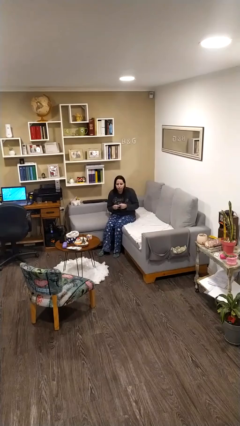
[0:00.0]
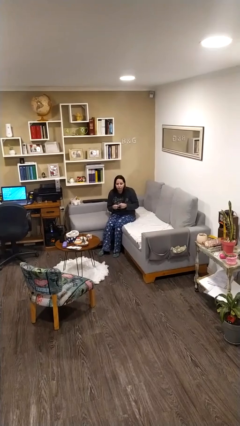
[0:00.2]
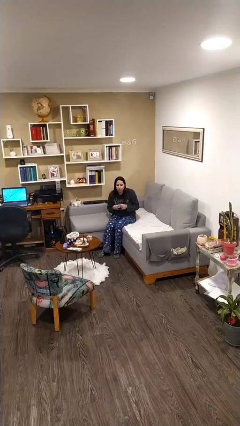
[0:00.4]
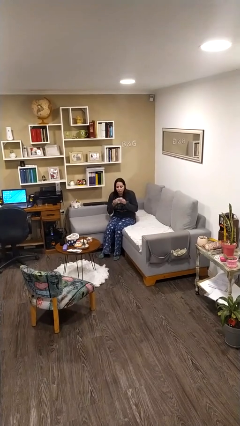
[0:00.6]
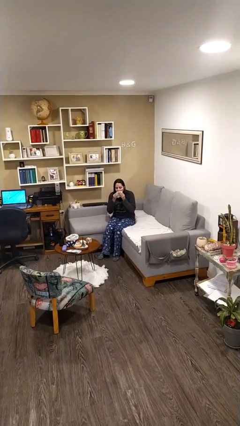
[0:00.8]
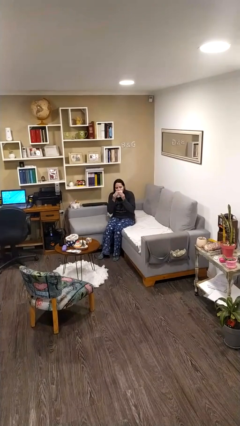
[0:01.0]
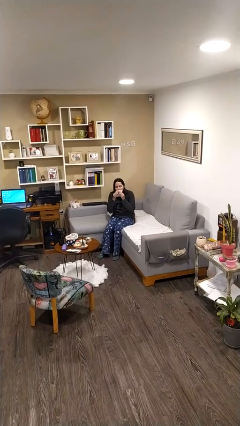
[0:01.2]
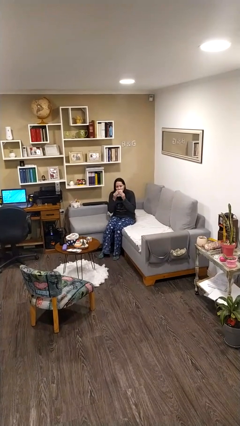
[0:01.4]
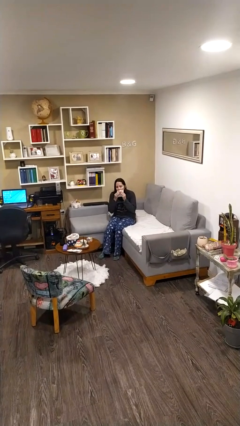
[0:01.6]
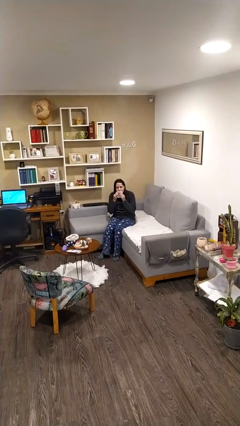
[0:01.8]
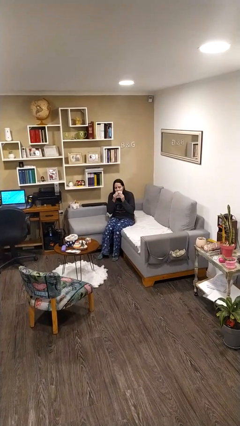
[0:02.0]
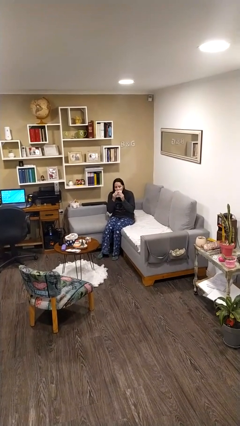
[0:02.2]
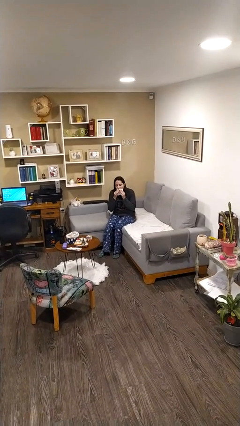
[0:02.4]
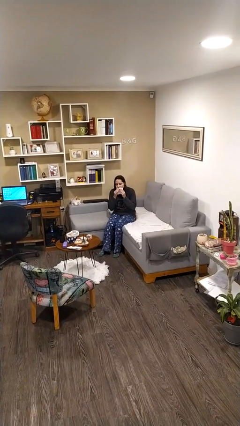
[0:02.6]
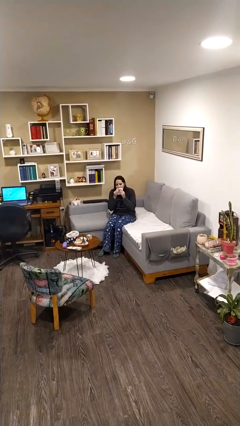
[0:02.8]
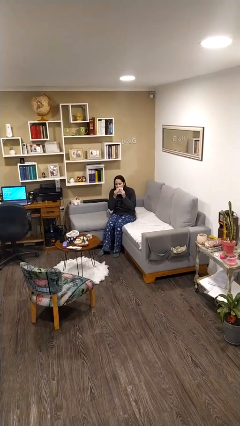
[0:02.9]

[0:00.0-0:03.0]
person wipes mouth with napkin

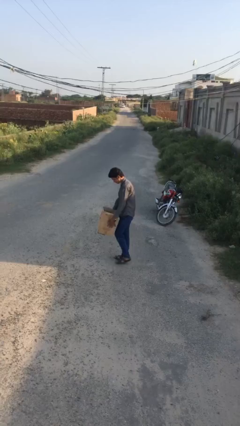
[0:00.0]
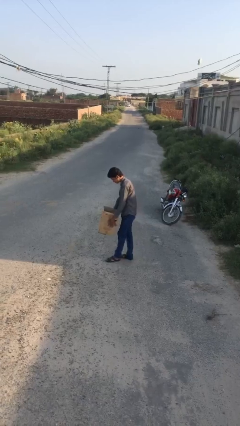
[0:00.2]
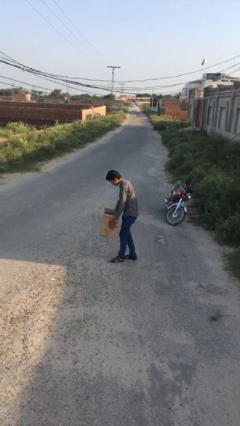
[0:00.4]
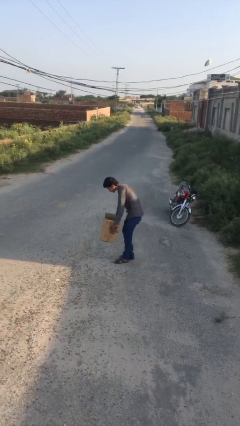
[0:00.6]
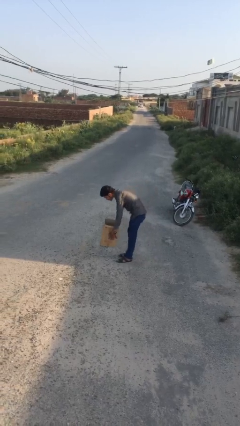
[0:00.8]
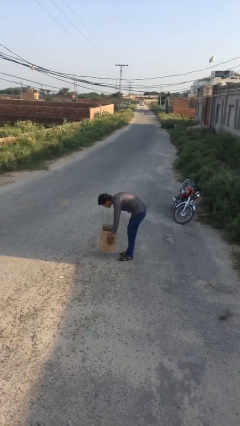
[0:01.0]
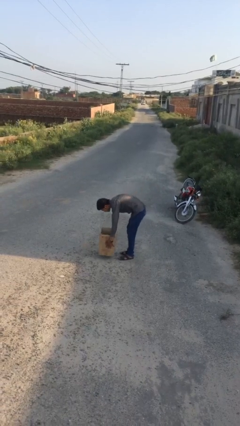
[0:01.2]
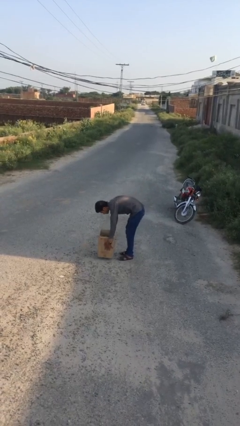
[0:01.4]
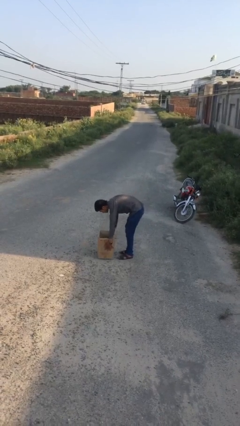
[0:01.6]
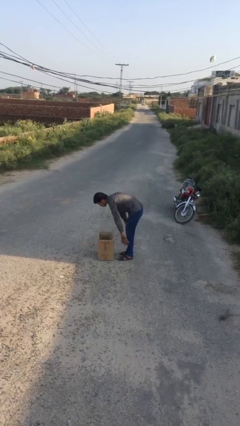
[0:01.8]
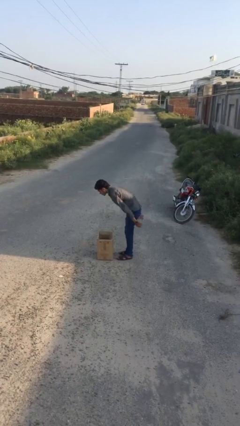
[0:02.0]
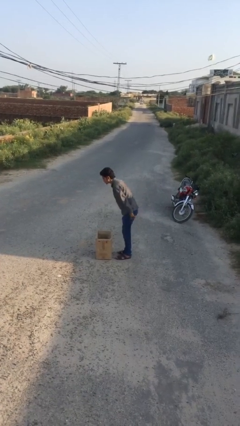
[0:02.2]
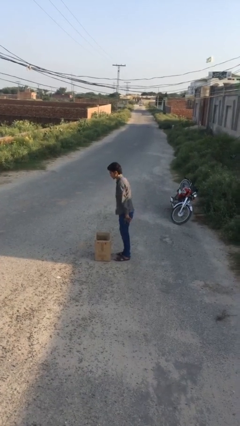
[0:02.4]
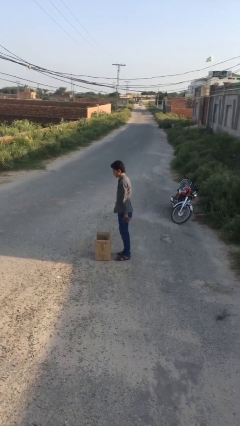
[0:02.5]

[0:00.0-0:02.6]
person puts down object on floor

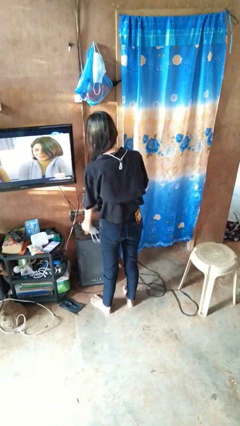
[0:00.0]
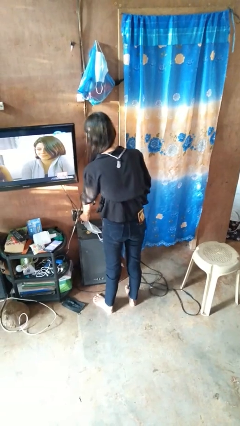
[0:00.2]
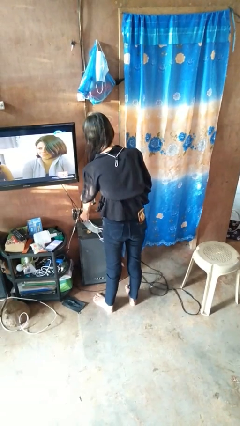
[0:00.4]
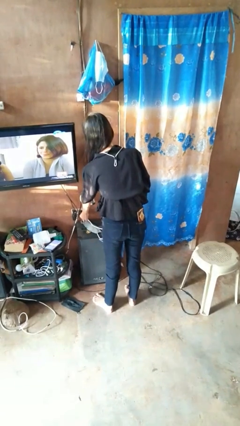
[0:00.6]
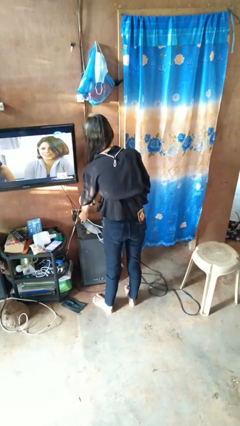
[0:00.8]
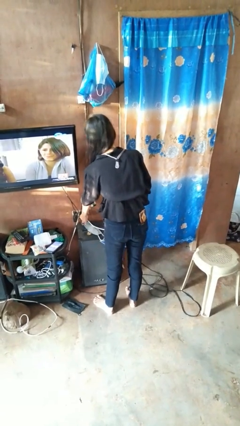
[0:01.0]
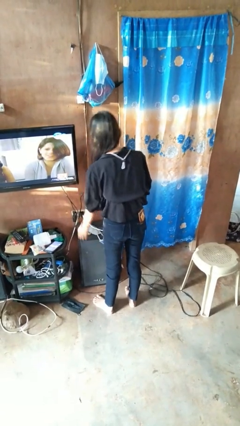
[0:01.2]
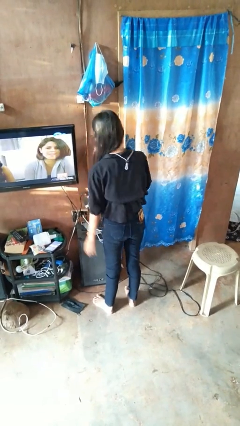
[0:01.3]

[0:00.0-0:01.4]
person plugs into electrical socket

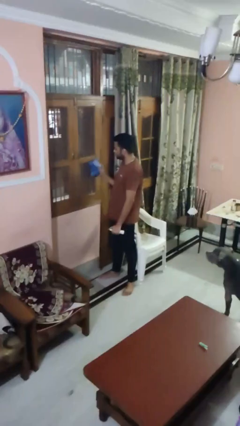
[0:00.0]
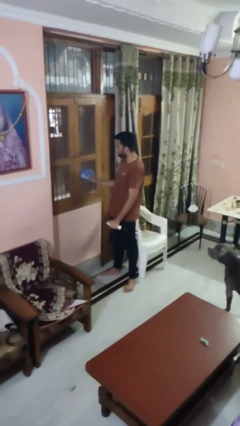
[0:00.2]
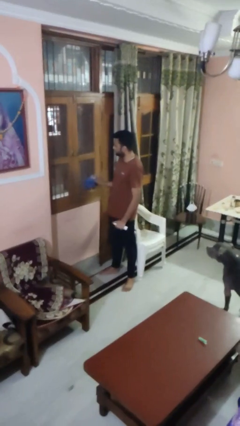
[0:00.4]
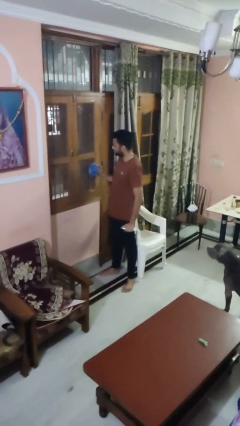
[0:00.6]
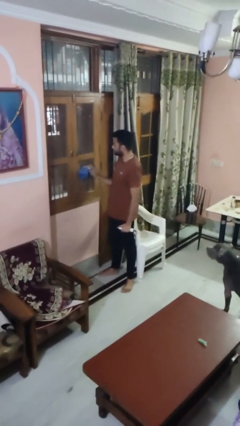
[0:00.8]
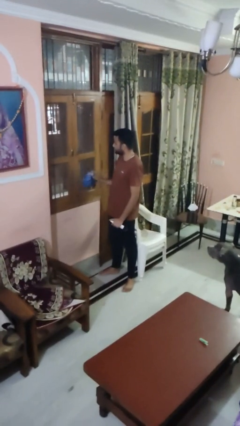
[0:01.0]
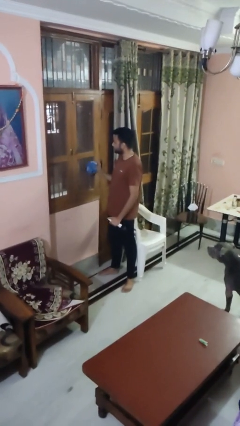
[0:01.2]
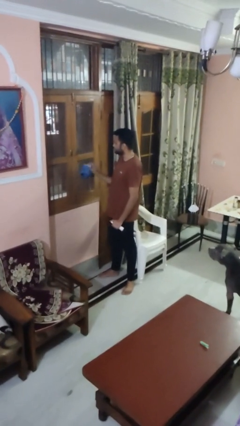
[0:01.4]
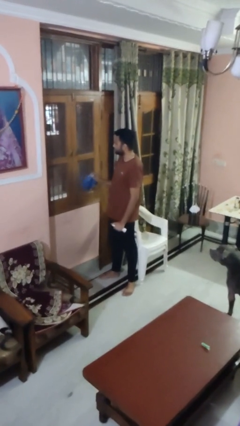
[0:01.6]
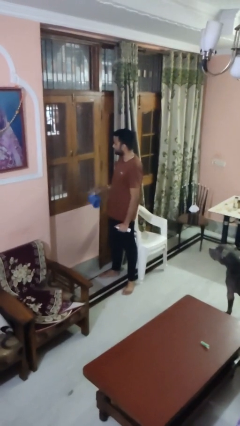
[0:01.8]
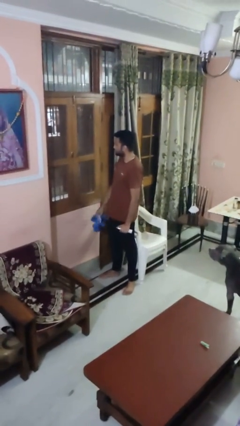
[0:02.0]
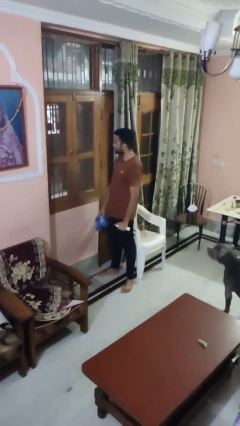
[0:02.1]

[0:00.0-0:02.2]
person washes window

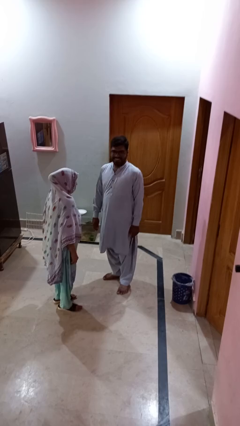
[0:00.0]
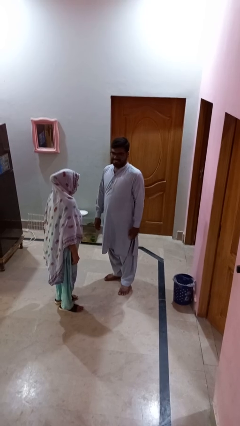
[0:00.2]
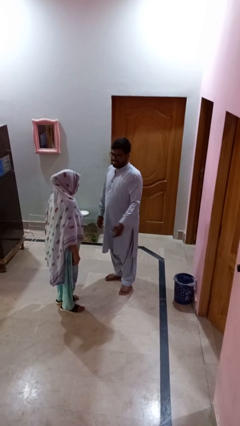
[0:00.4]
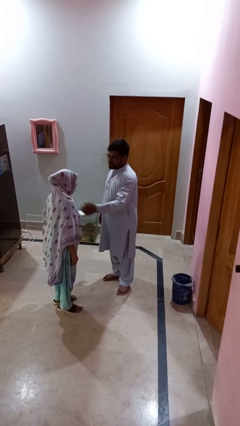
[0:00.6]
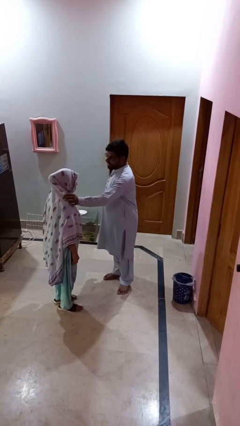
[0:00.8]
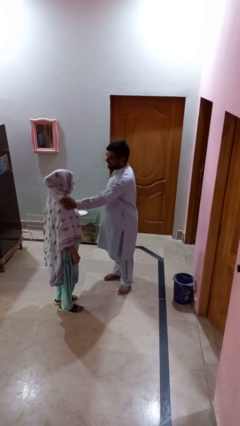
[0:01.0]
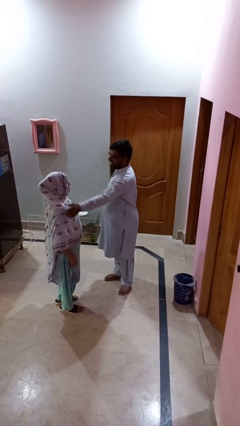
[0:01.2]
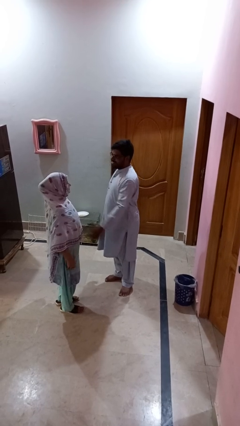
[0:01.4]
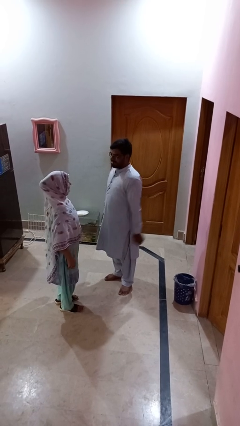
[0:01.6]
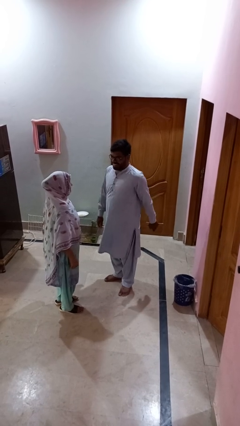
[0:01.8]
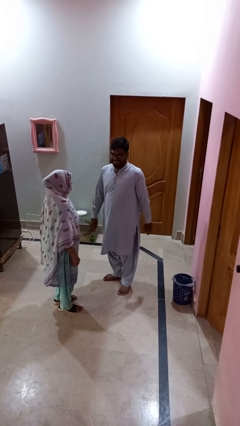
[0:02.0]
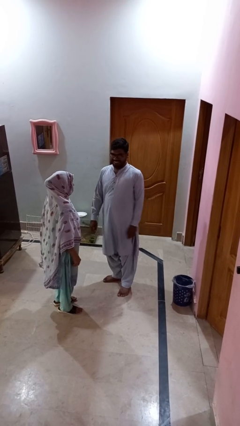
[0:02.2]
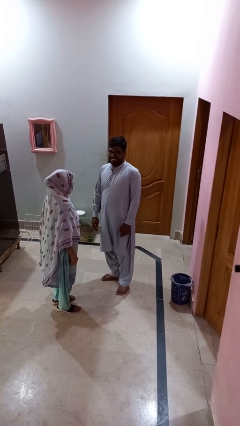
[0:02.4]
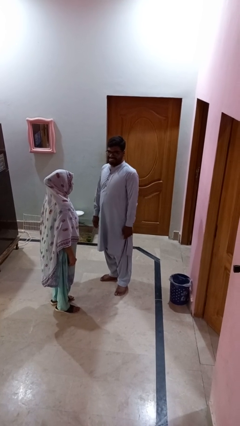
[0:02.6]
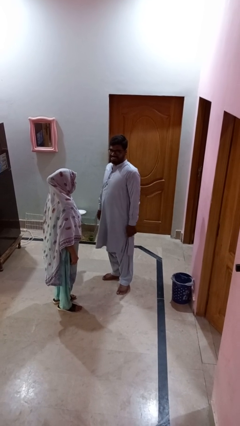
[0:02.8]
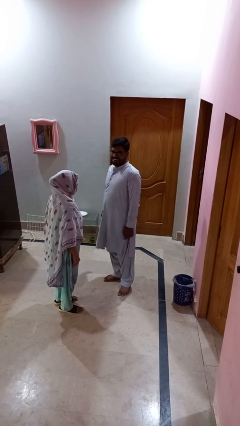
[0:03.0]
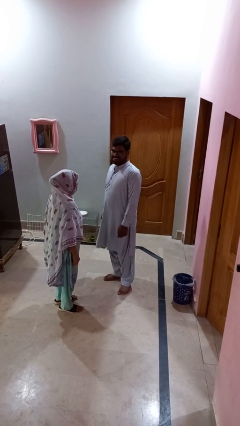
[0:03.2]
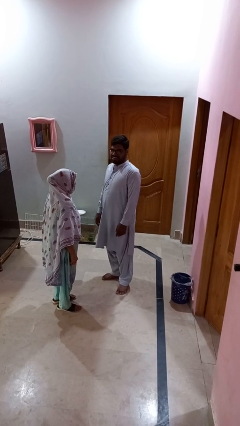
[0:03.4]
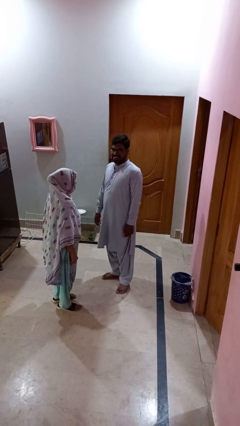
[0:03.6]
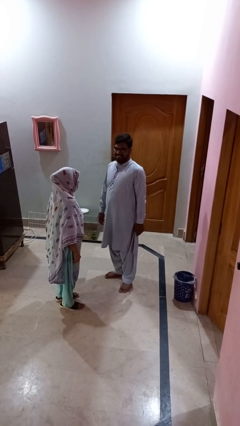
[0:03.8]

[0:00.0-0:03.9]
person shoves person

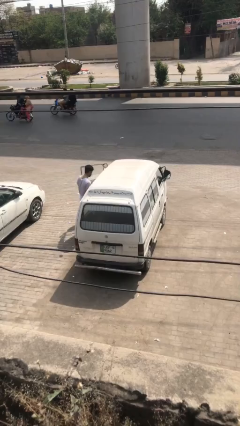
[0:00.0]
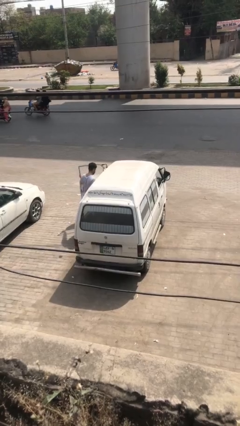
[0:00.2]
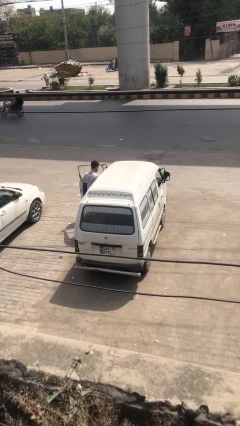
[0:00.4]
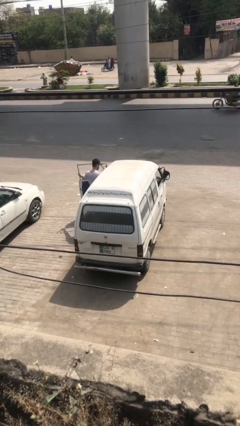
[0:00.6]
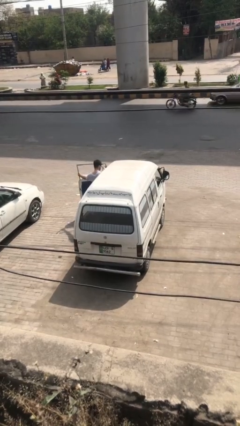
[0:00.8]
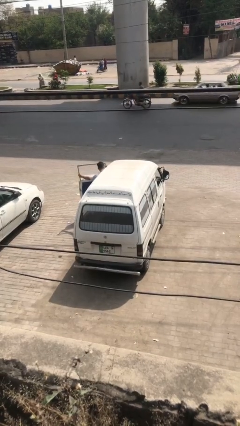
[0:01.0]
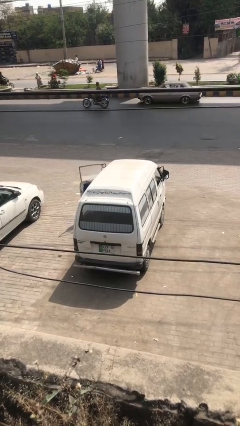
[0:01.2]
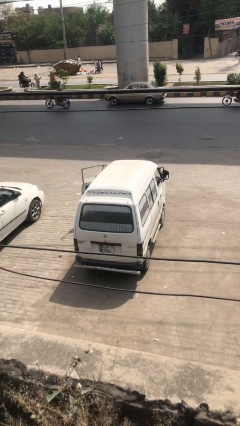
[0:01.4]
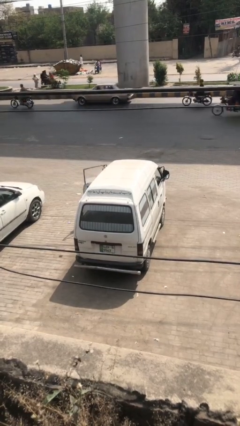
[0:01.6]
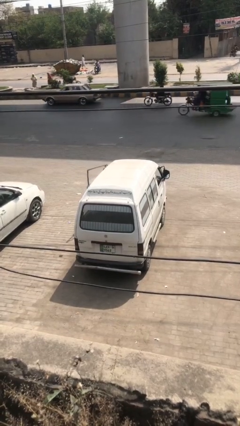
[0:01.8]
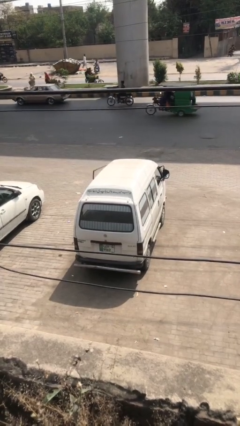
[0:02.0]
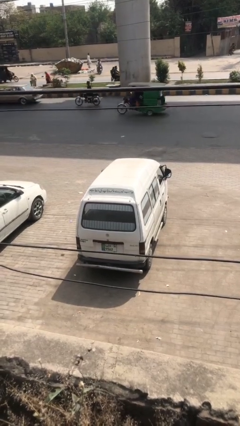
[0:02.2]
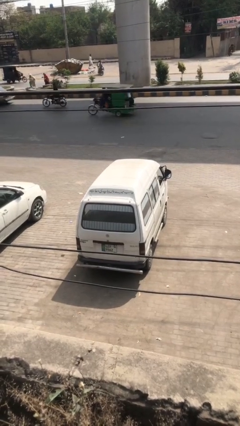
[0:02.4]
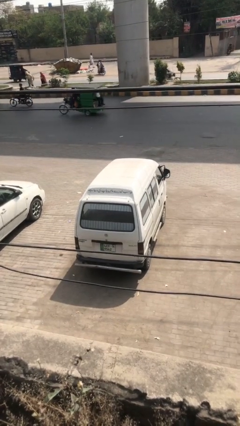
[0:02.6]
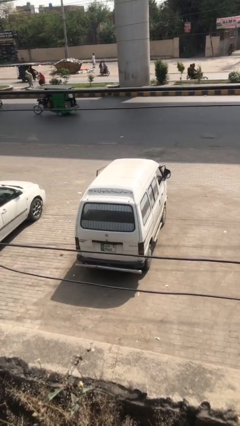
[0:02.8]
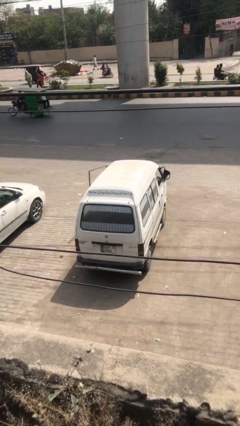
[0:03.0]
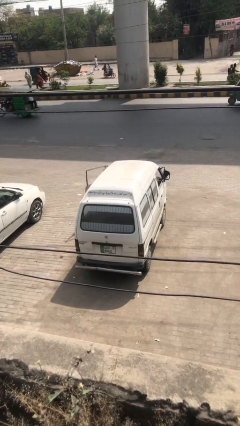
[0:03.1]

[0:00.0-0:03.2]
car picks up person

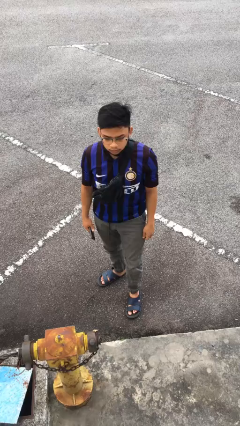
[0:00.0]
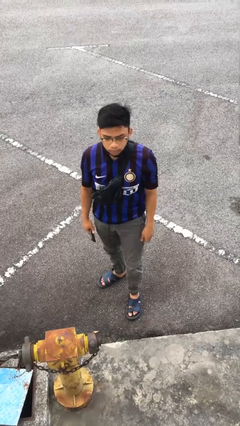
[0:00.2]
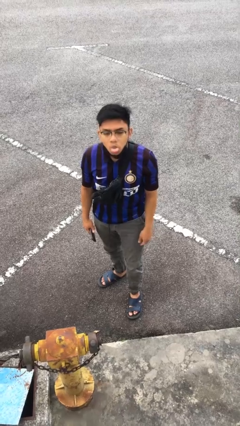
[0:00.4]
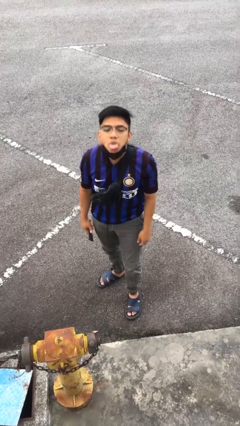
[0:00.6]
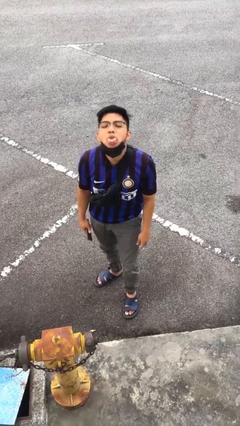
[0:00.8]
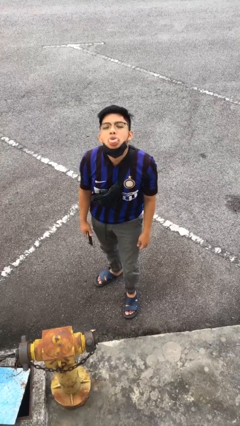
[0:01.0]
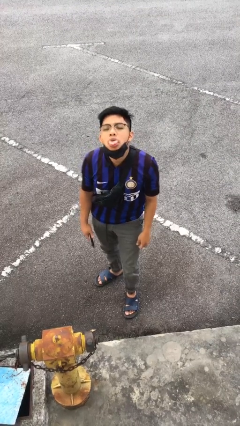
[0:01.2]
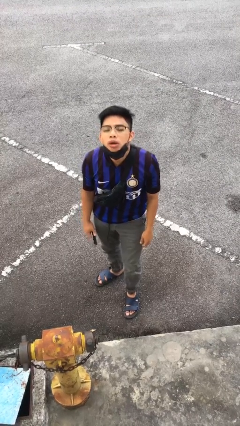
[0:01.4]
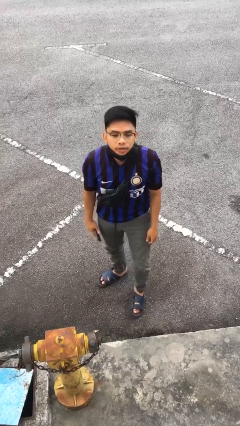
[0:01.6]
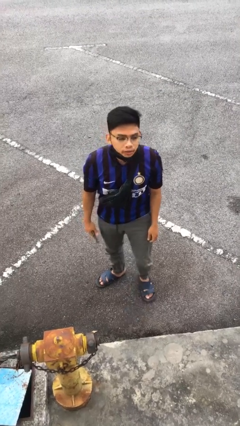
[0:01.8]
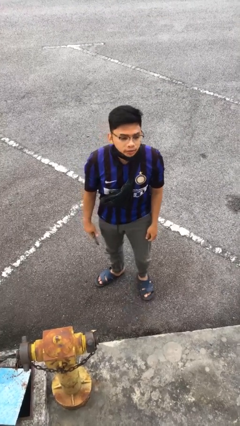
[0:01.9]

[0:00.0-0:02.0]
person sticks out tongue
